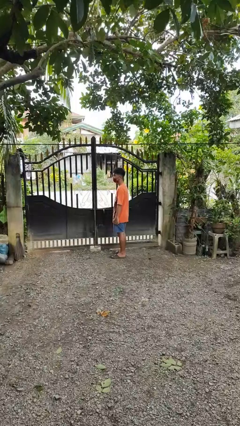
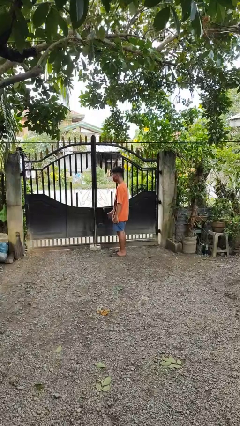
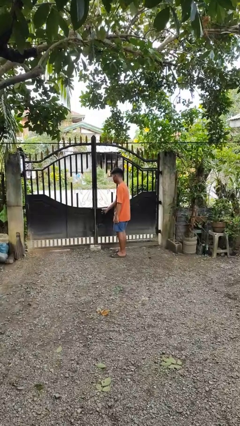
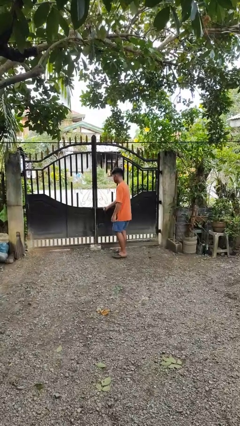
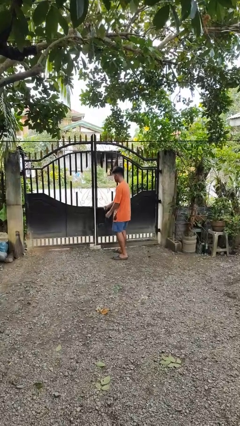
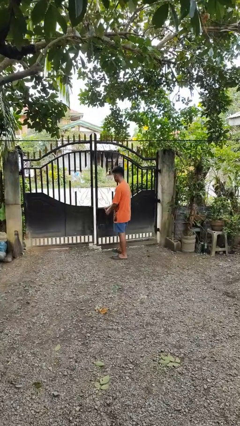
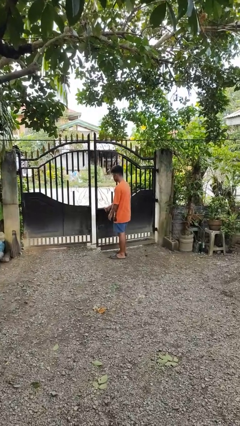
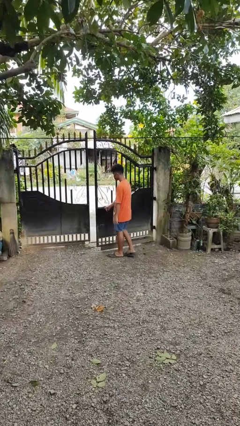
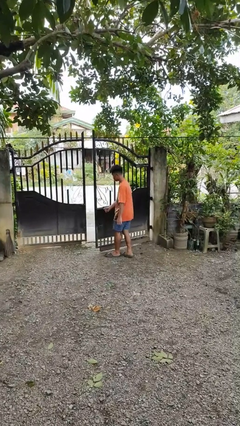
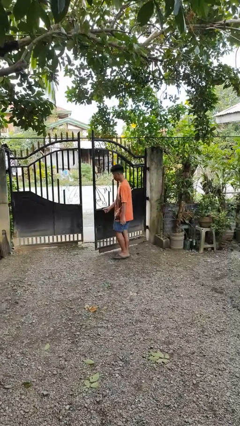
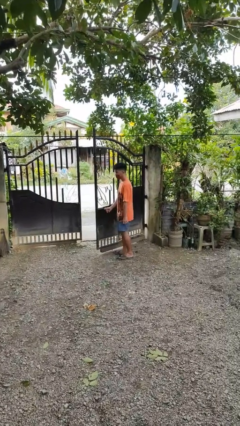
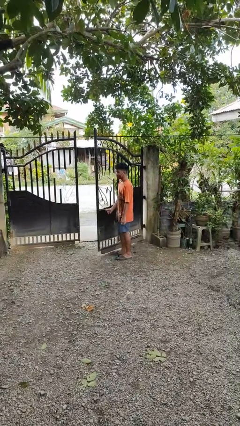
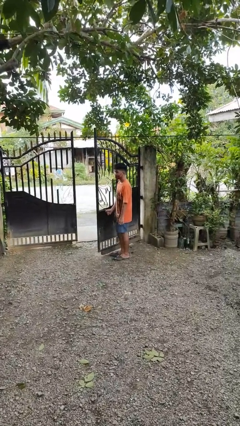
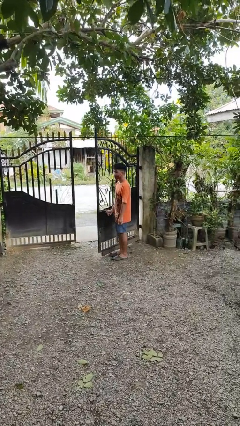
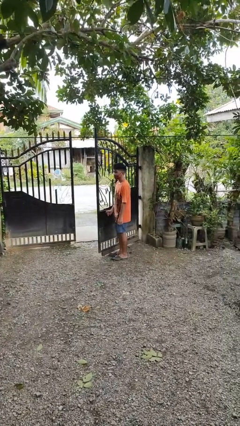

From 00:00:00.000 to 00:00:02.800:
person opens gate

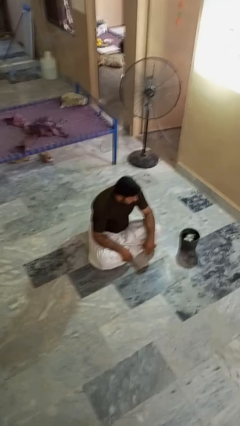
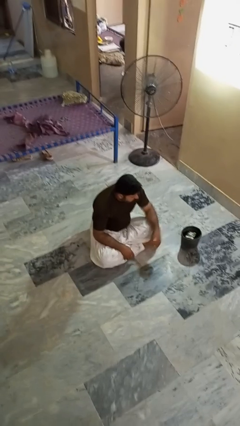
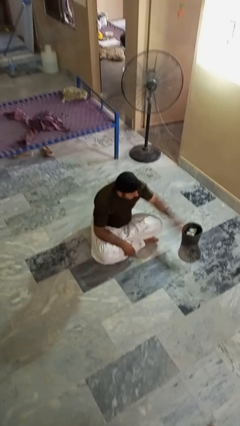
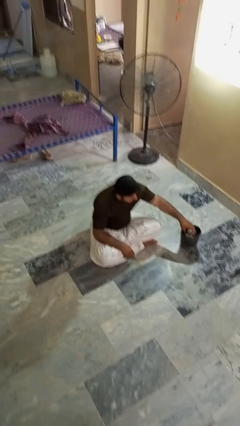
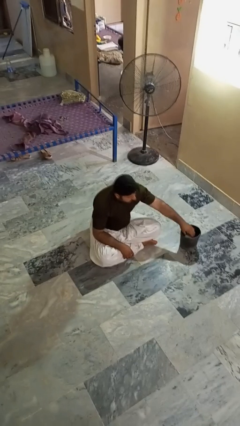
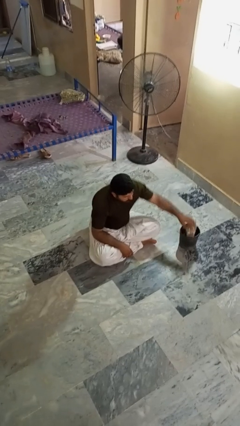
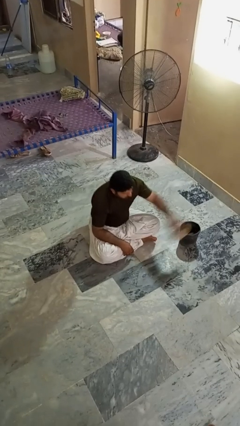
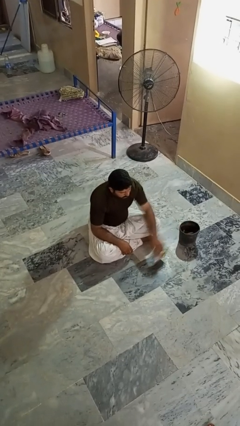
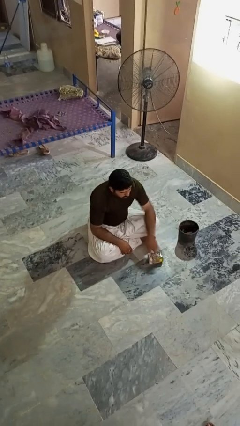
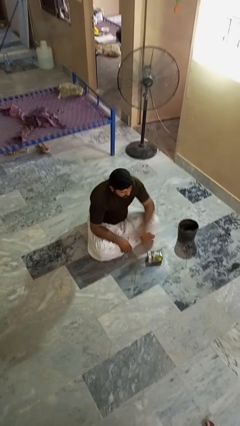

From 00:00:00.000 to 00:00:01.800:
person takes object from basket
